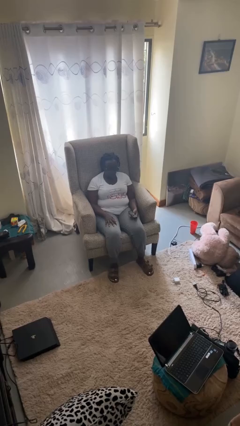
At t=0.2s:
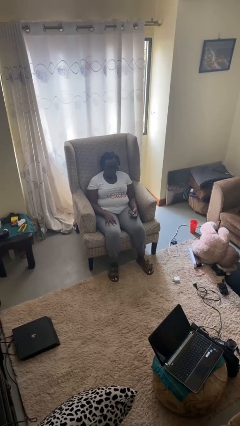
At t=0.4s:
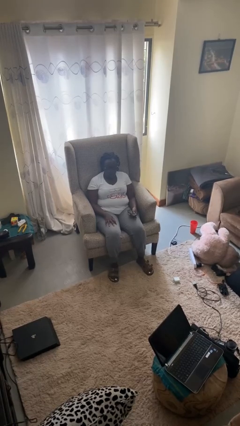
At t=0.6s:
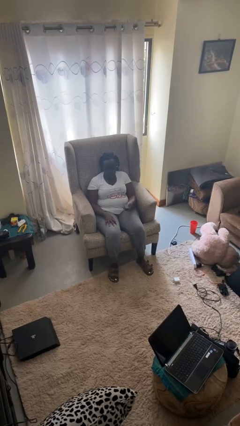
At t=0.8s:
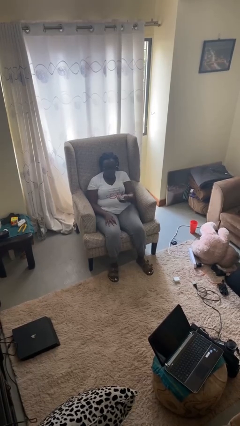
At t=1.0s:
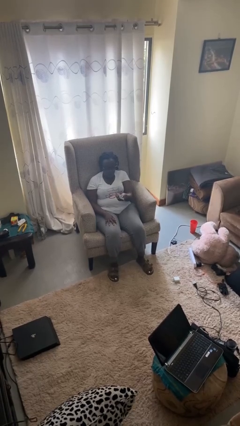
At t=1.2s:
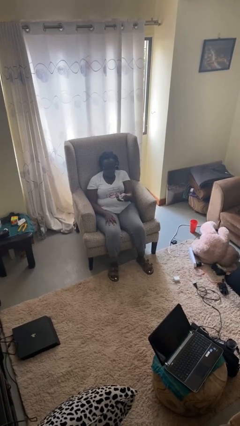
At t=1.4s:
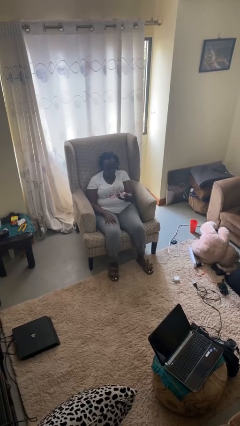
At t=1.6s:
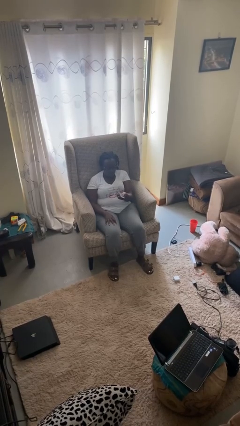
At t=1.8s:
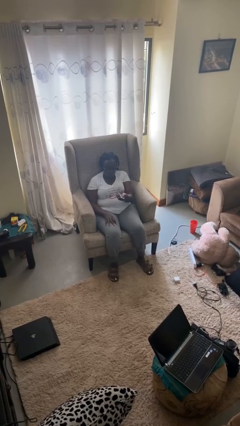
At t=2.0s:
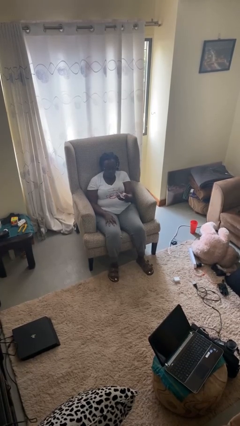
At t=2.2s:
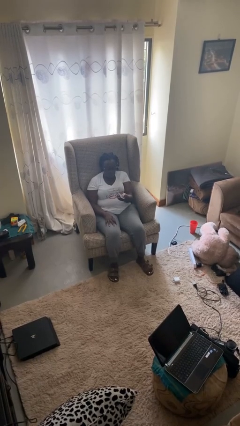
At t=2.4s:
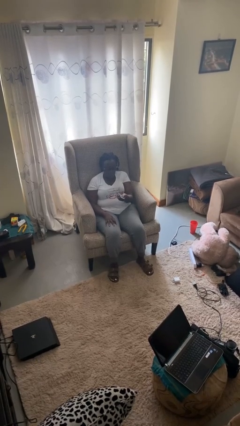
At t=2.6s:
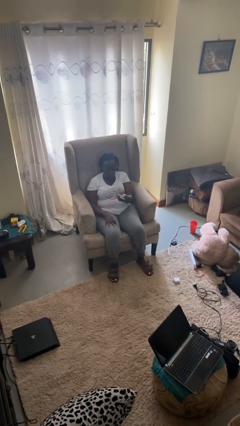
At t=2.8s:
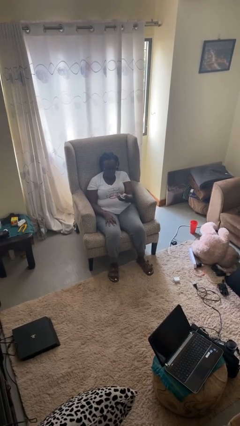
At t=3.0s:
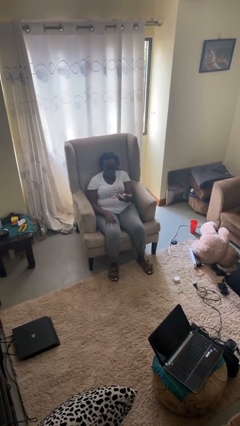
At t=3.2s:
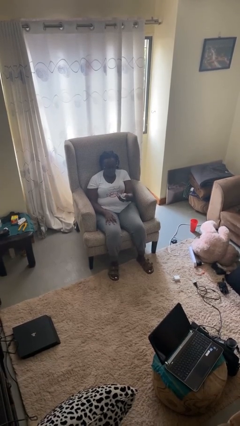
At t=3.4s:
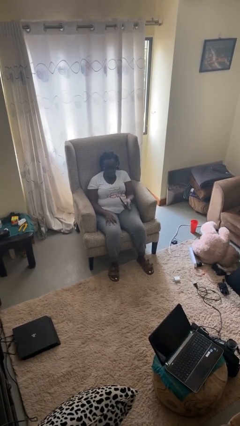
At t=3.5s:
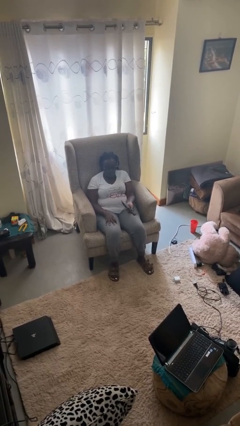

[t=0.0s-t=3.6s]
person uses television remote

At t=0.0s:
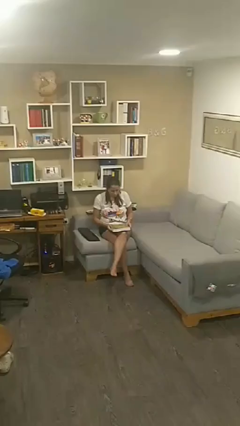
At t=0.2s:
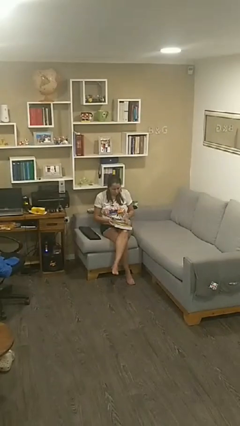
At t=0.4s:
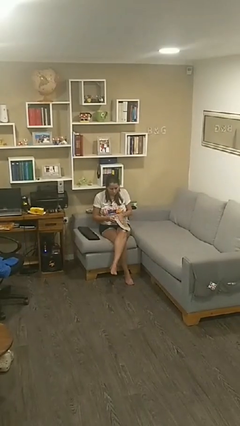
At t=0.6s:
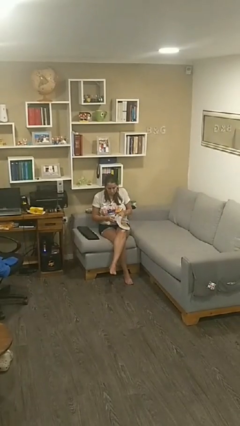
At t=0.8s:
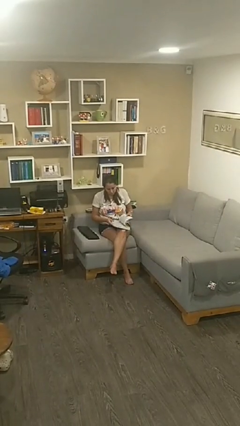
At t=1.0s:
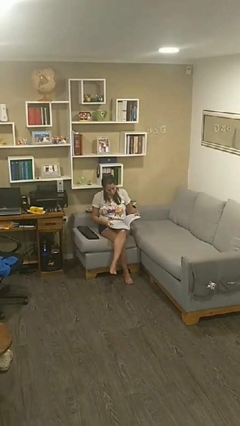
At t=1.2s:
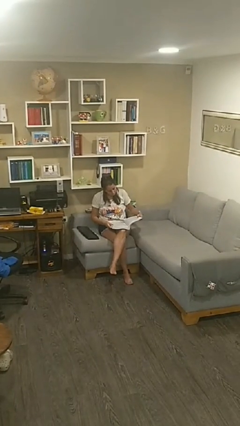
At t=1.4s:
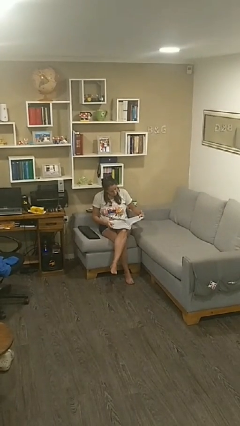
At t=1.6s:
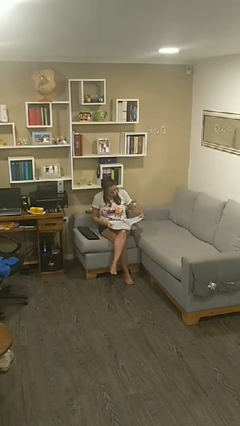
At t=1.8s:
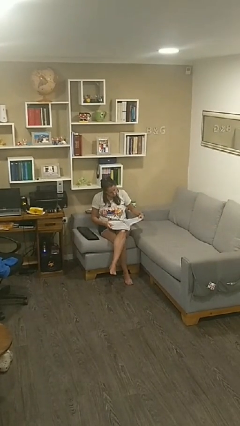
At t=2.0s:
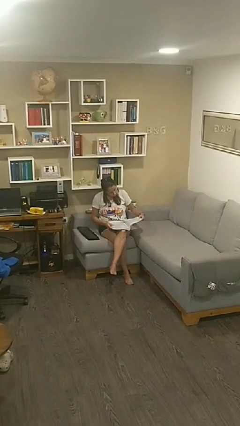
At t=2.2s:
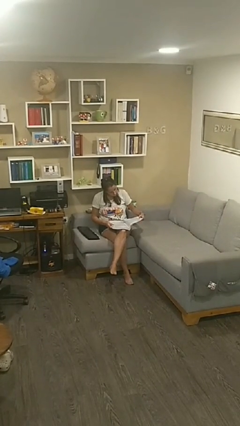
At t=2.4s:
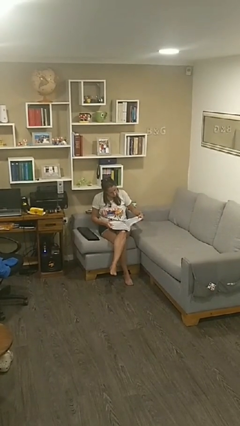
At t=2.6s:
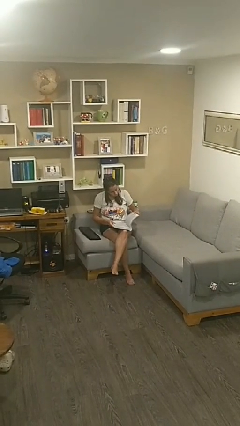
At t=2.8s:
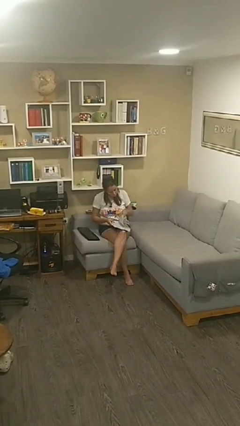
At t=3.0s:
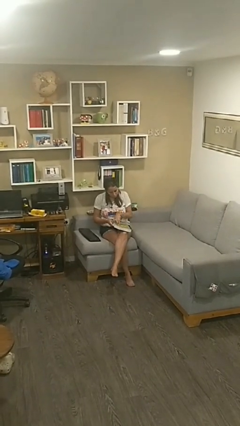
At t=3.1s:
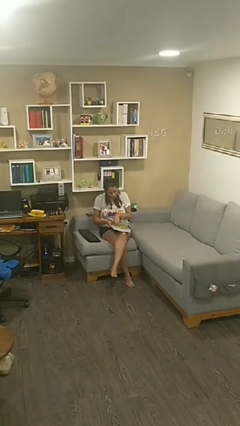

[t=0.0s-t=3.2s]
person reads document

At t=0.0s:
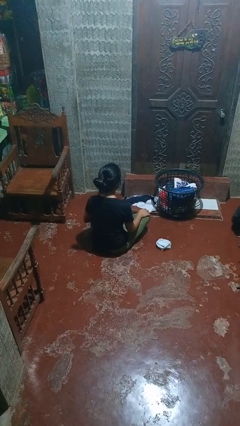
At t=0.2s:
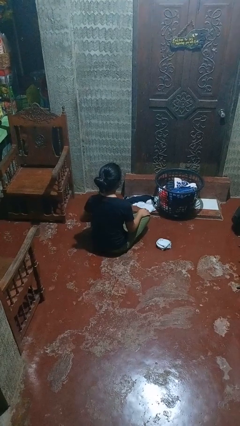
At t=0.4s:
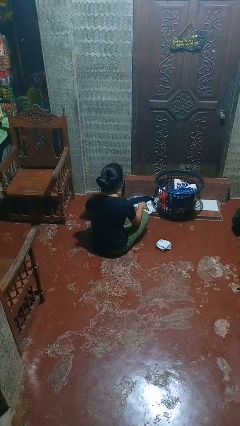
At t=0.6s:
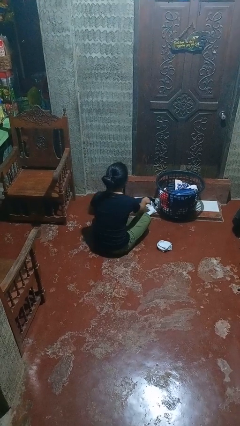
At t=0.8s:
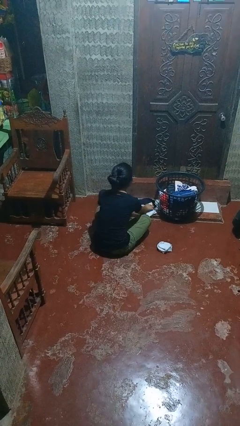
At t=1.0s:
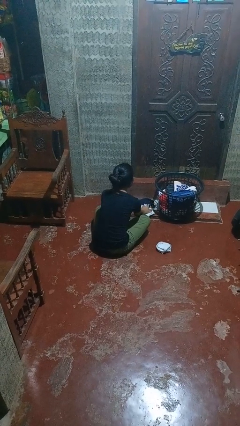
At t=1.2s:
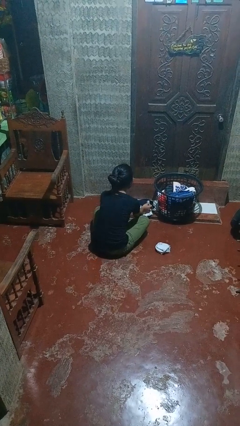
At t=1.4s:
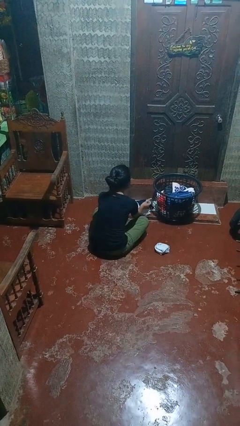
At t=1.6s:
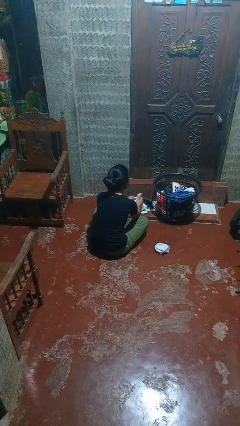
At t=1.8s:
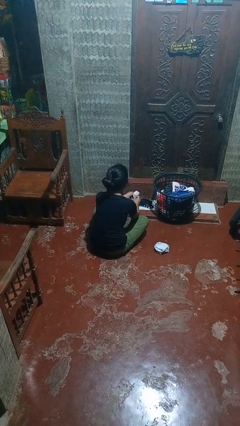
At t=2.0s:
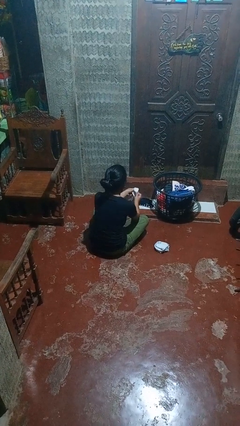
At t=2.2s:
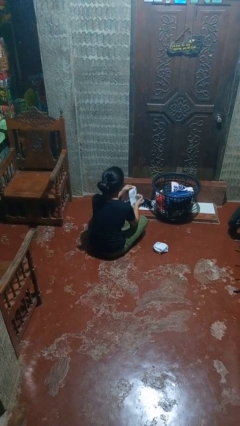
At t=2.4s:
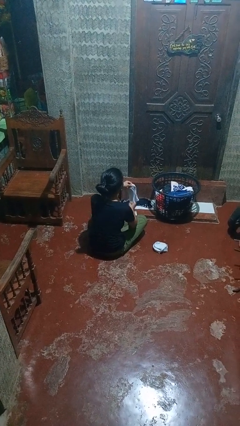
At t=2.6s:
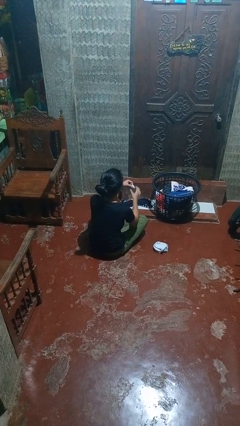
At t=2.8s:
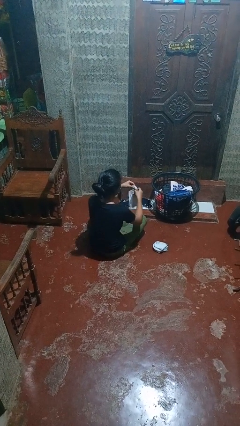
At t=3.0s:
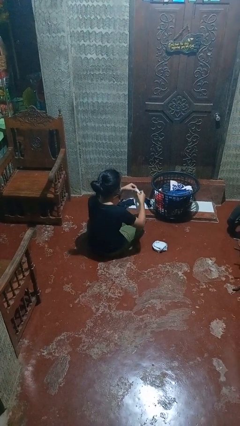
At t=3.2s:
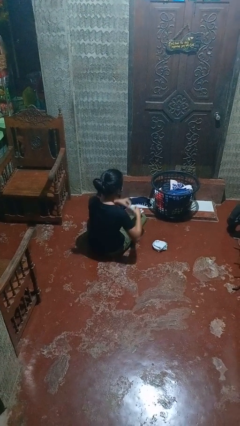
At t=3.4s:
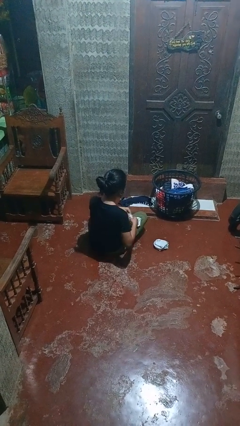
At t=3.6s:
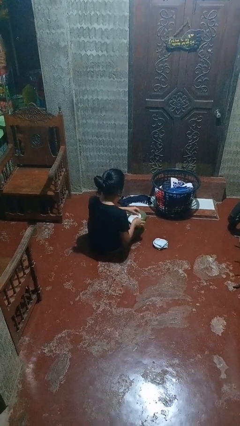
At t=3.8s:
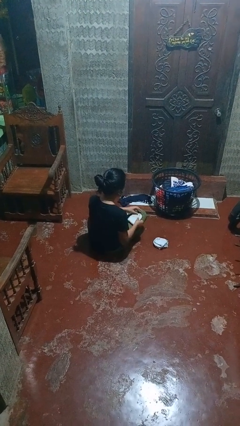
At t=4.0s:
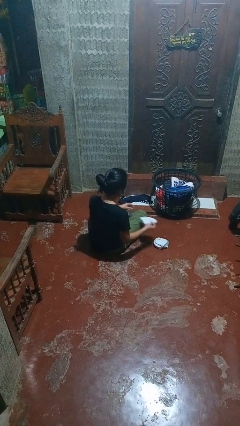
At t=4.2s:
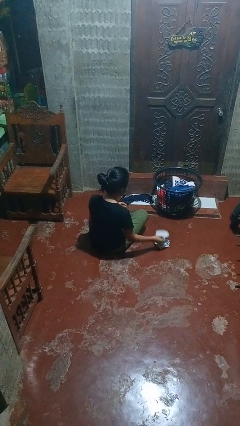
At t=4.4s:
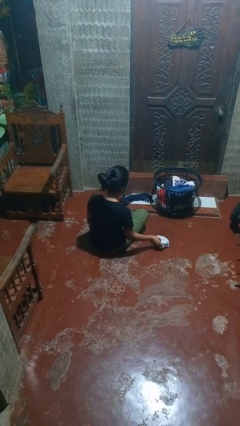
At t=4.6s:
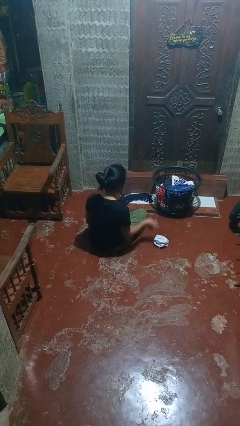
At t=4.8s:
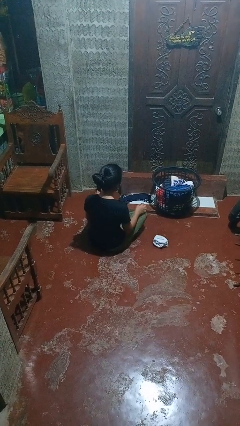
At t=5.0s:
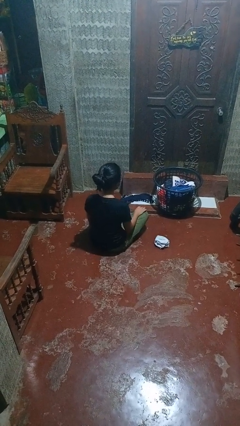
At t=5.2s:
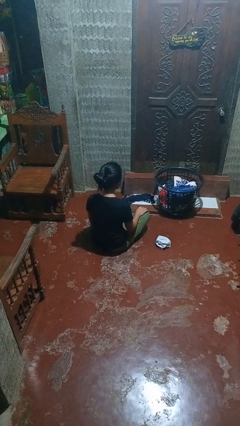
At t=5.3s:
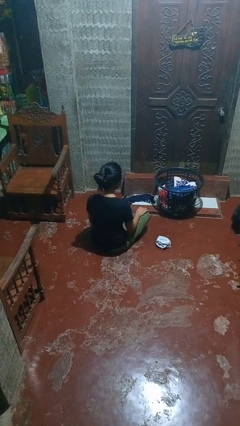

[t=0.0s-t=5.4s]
person folds socks

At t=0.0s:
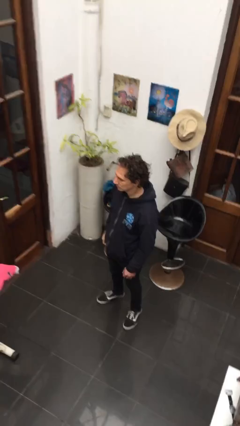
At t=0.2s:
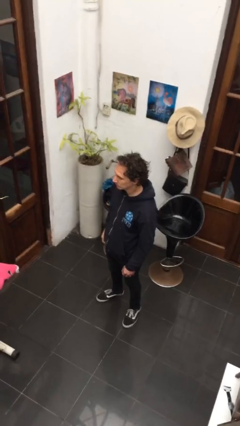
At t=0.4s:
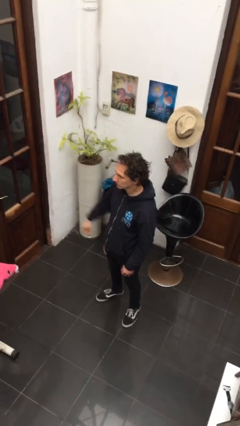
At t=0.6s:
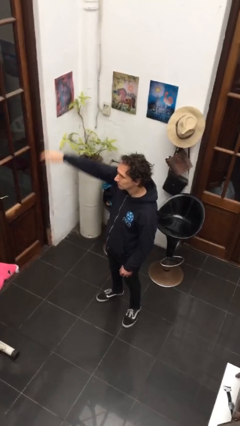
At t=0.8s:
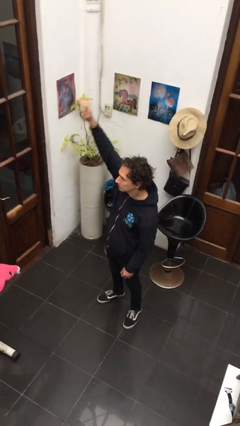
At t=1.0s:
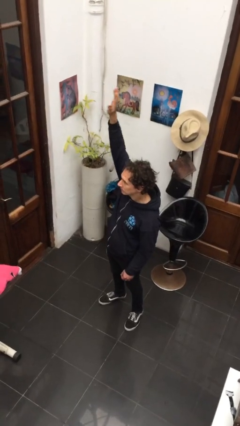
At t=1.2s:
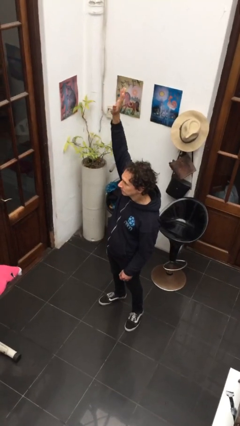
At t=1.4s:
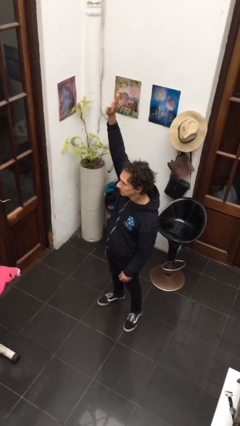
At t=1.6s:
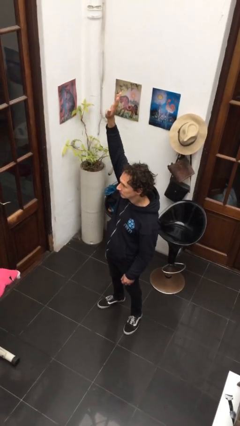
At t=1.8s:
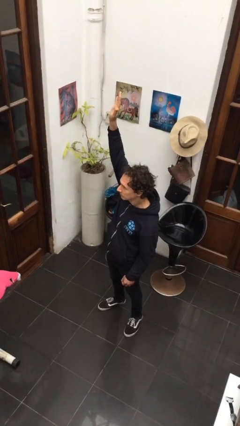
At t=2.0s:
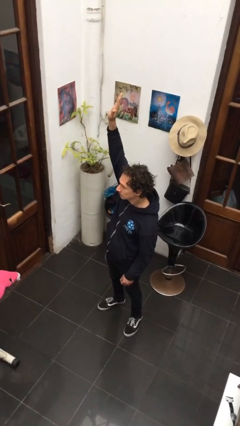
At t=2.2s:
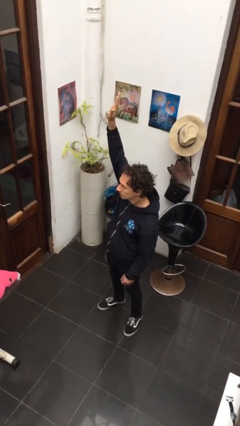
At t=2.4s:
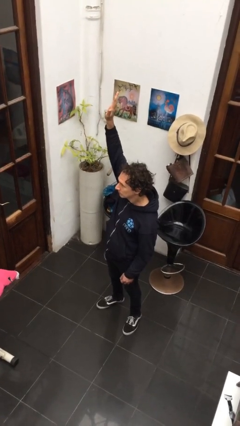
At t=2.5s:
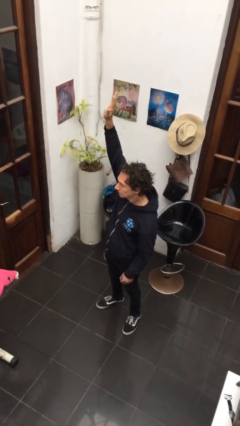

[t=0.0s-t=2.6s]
person gestures raise hand

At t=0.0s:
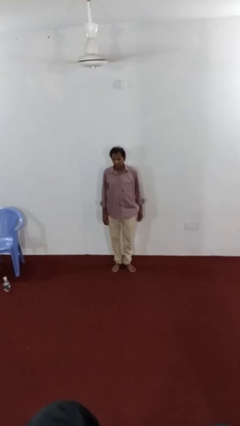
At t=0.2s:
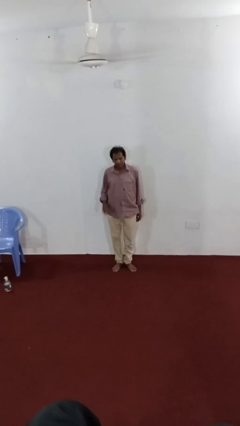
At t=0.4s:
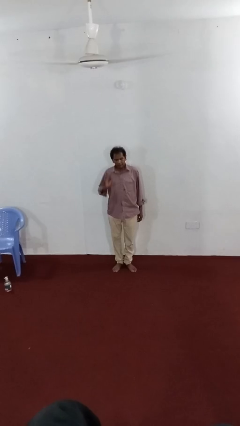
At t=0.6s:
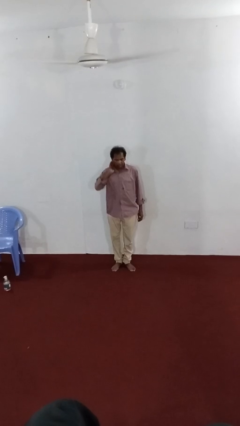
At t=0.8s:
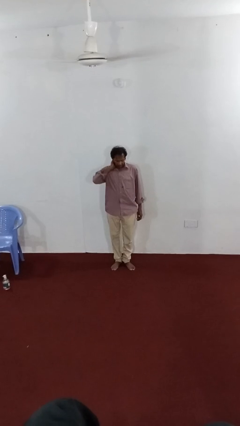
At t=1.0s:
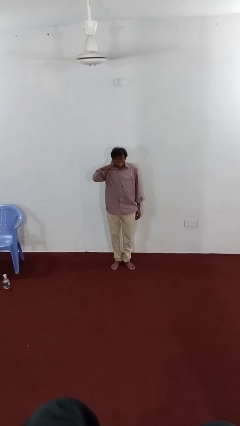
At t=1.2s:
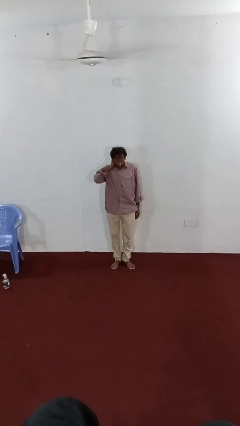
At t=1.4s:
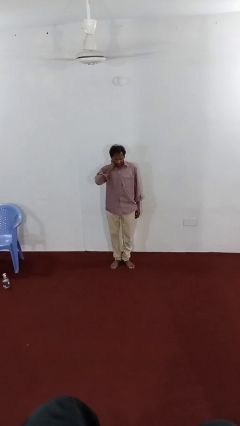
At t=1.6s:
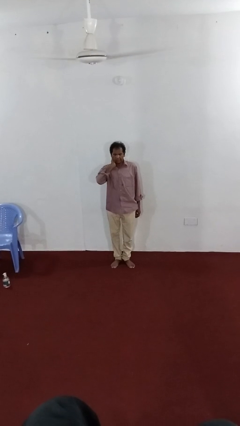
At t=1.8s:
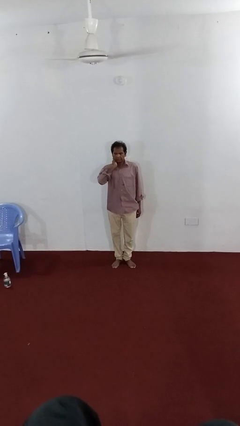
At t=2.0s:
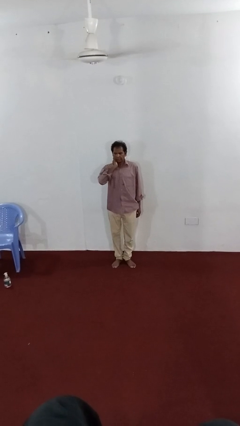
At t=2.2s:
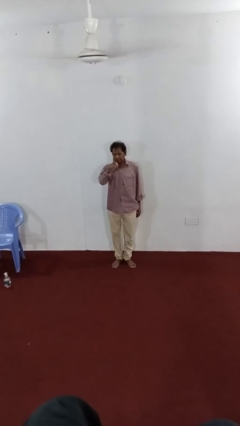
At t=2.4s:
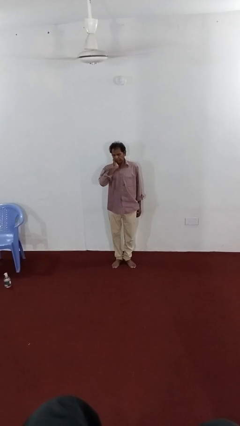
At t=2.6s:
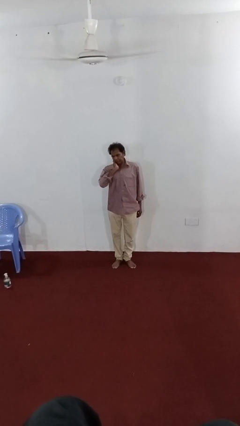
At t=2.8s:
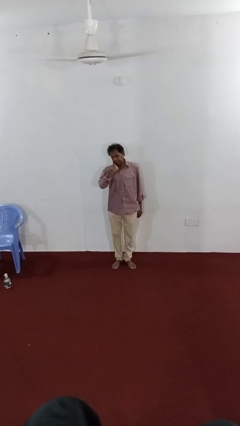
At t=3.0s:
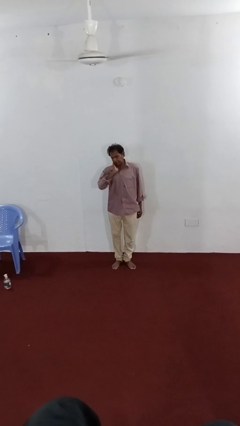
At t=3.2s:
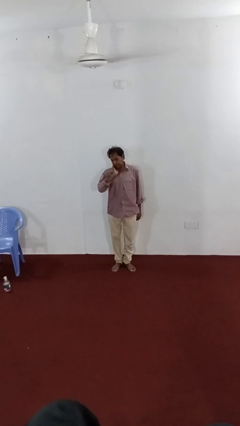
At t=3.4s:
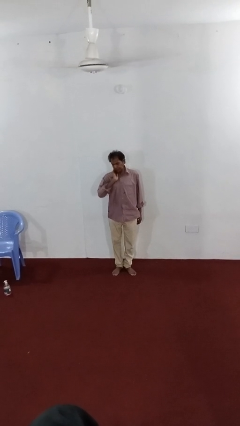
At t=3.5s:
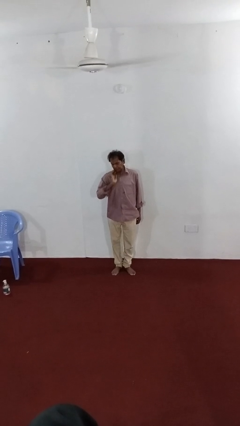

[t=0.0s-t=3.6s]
person rubs neck
